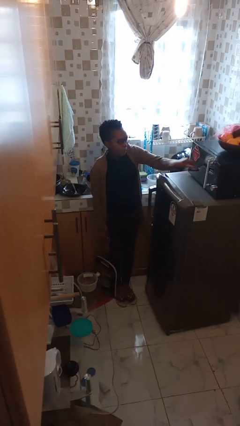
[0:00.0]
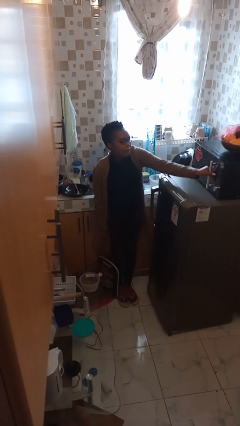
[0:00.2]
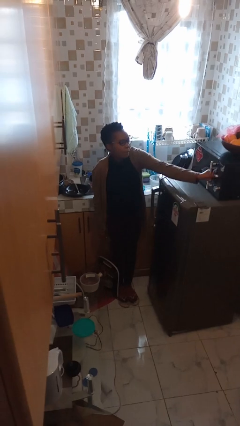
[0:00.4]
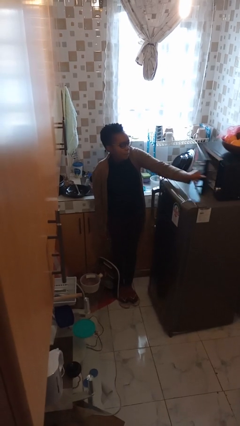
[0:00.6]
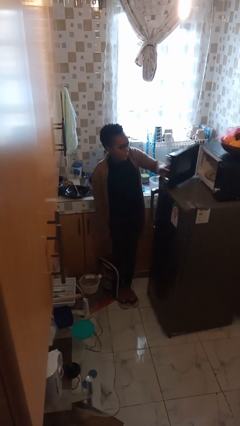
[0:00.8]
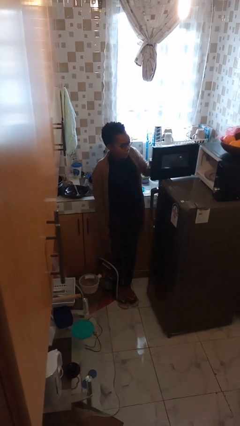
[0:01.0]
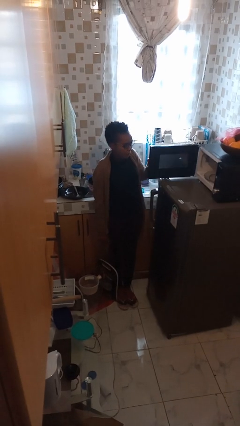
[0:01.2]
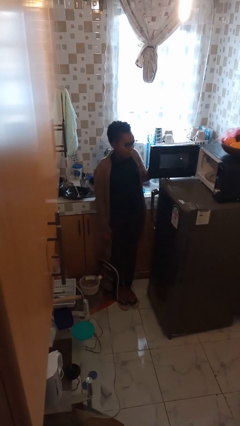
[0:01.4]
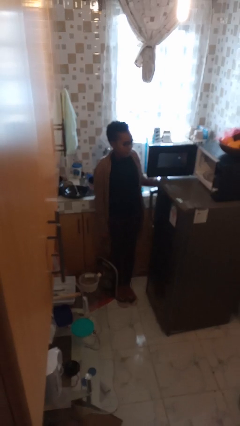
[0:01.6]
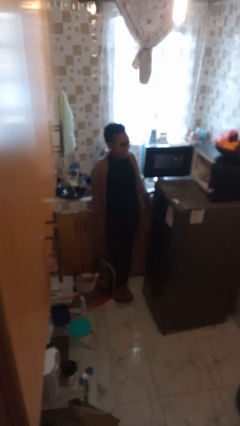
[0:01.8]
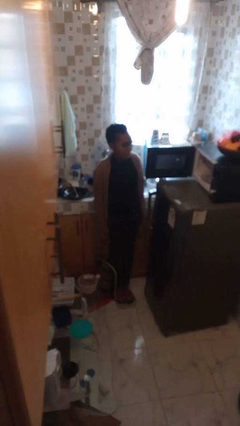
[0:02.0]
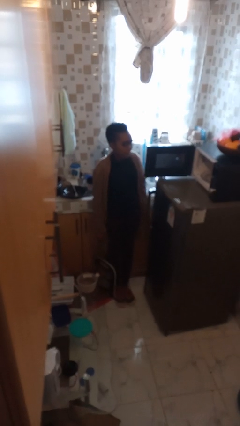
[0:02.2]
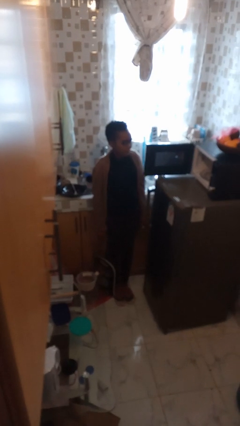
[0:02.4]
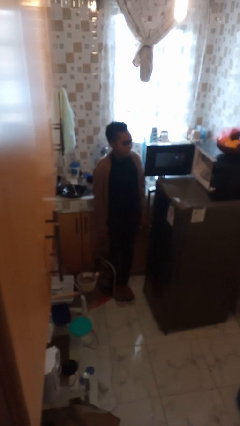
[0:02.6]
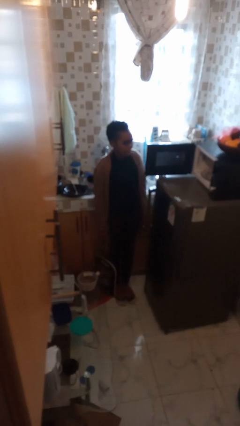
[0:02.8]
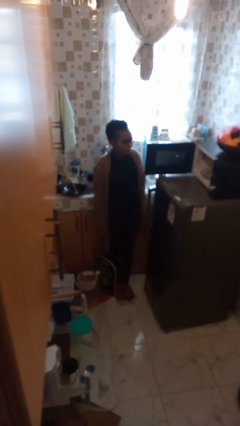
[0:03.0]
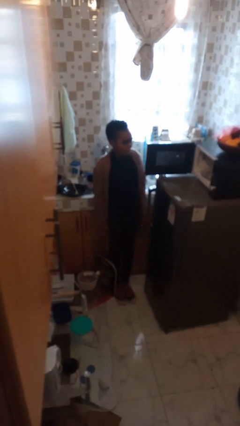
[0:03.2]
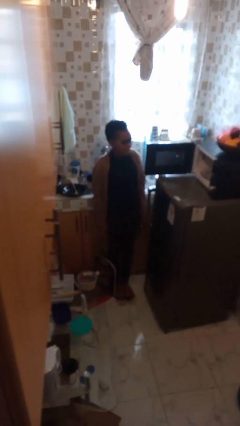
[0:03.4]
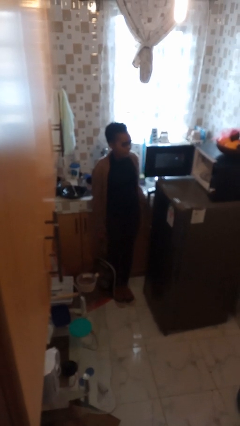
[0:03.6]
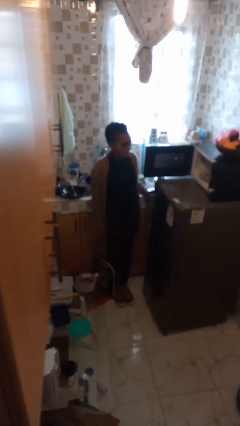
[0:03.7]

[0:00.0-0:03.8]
person opens microwave

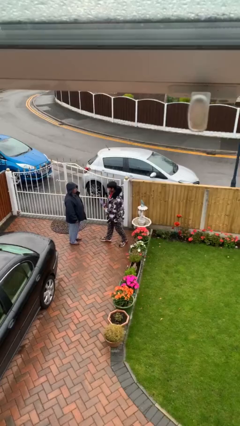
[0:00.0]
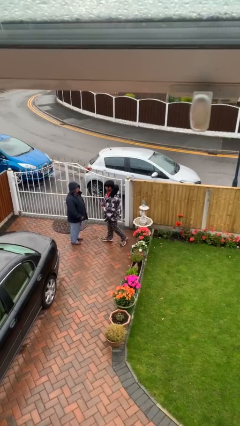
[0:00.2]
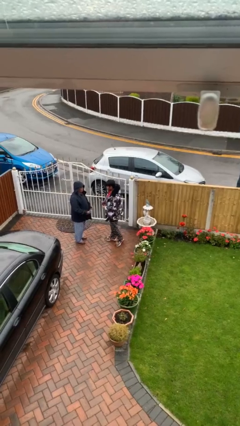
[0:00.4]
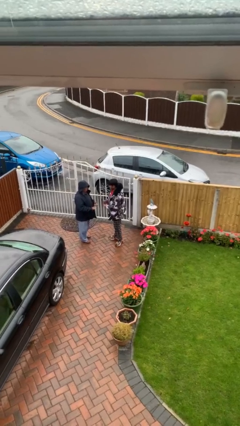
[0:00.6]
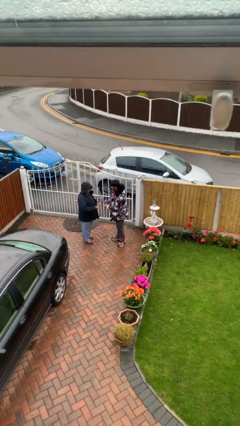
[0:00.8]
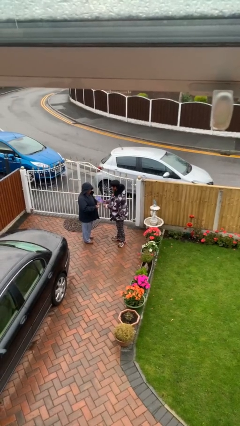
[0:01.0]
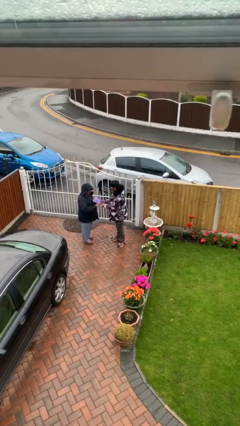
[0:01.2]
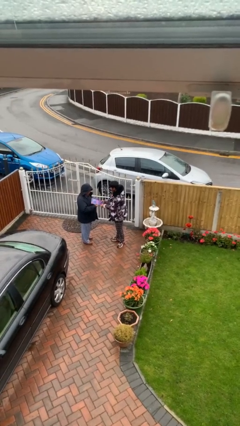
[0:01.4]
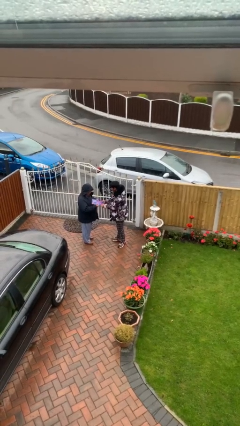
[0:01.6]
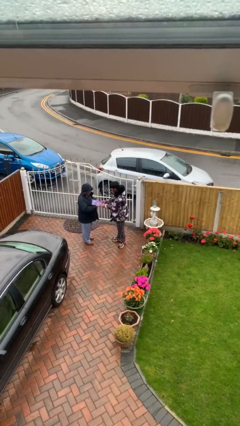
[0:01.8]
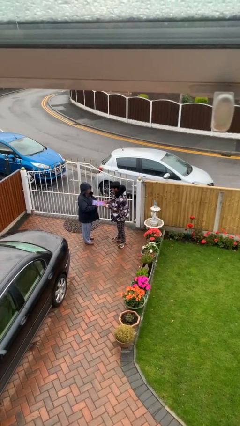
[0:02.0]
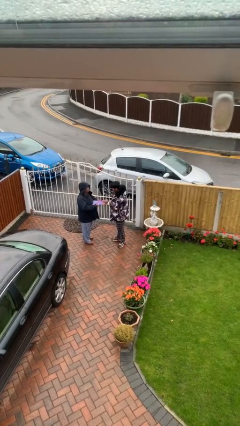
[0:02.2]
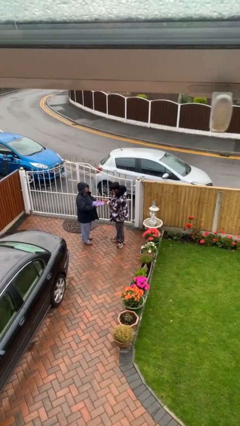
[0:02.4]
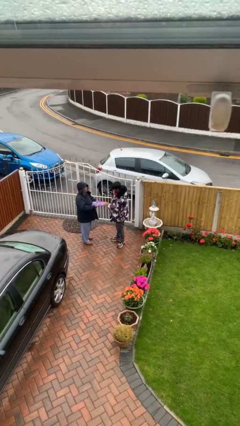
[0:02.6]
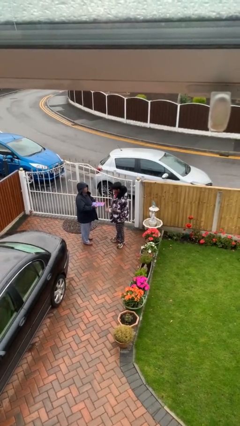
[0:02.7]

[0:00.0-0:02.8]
person transfers object to person

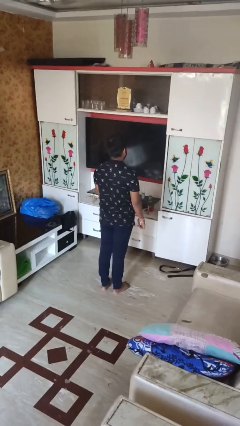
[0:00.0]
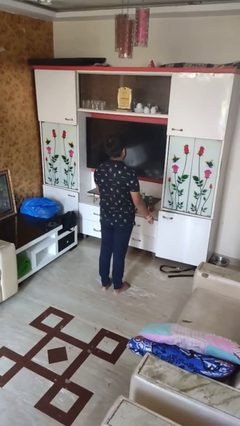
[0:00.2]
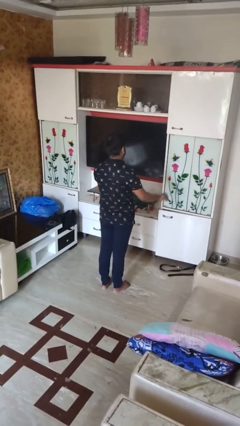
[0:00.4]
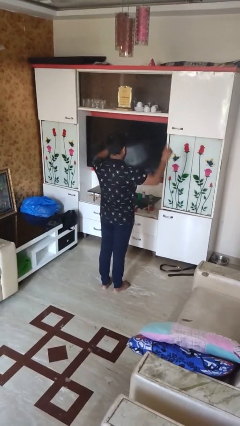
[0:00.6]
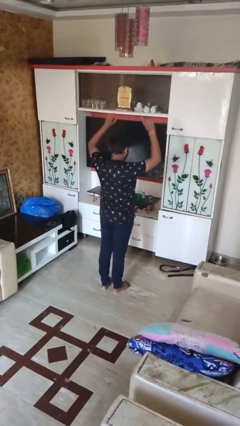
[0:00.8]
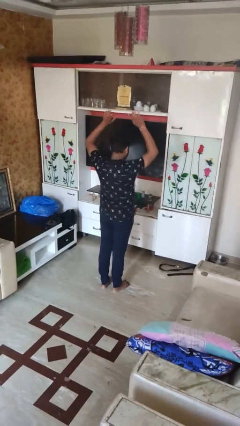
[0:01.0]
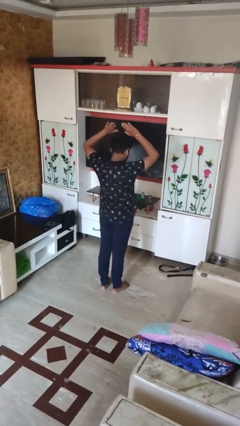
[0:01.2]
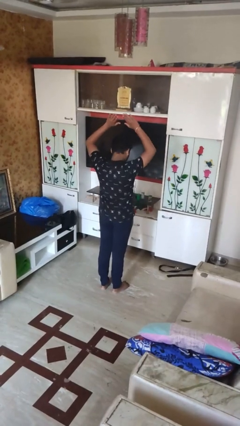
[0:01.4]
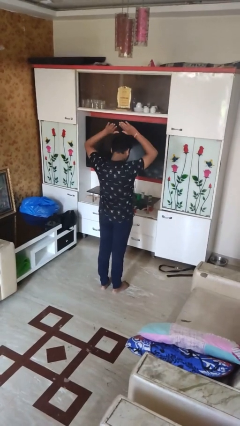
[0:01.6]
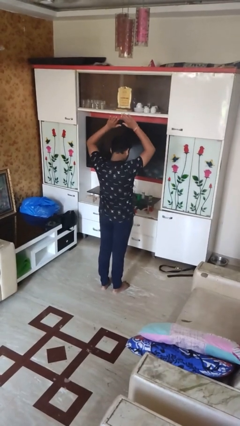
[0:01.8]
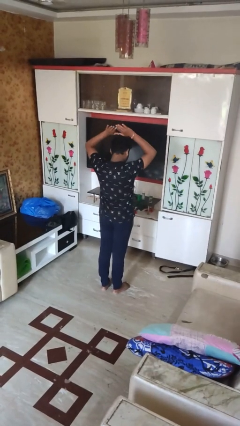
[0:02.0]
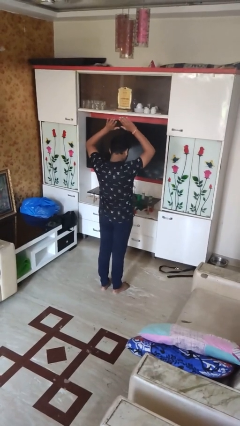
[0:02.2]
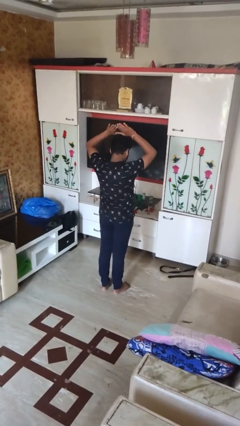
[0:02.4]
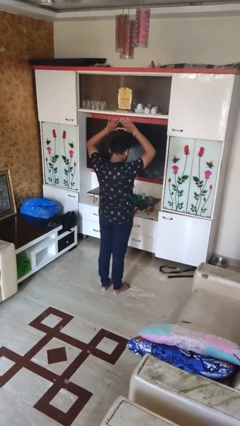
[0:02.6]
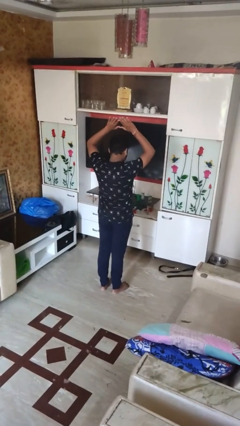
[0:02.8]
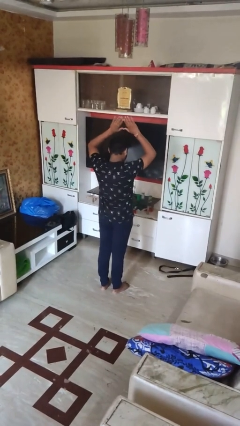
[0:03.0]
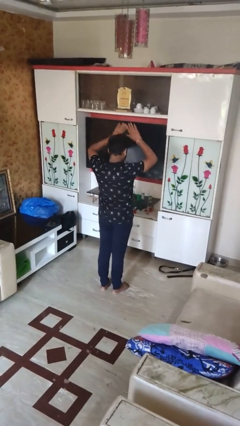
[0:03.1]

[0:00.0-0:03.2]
person dances in place

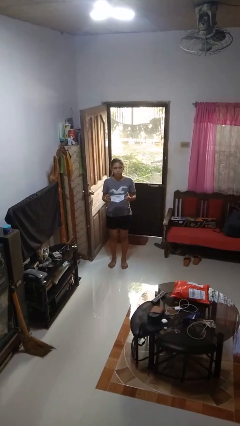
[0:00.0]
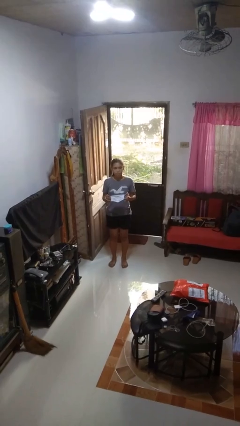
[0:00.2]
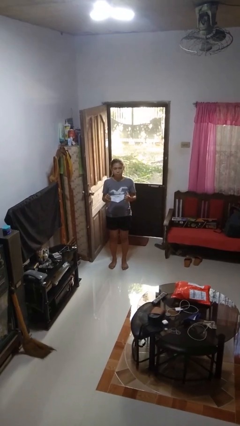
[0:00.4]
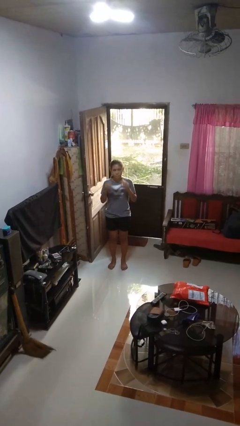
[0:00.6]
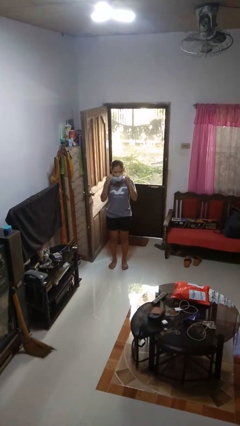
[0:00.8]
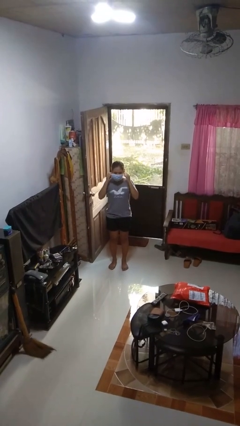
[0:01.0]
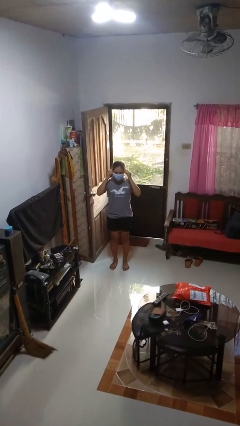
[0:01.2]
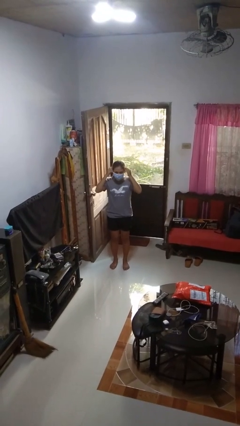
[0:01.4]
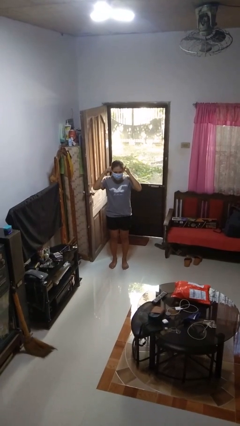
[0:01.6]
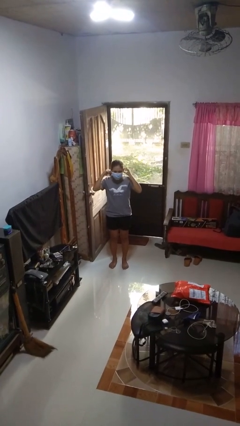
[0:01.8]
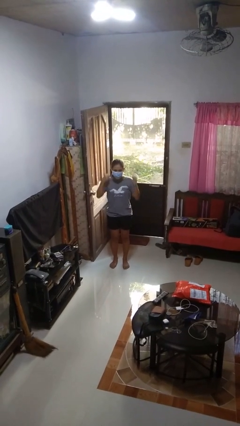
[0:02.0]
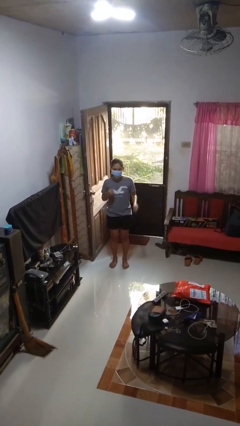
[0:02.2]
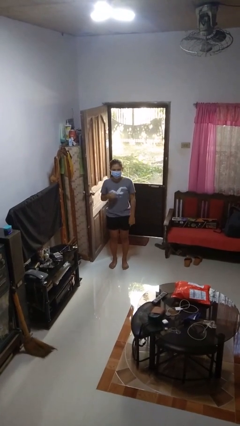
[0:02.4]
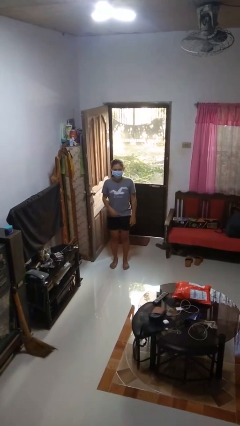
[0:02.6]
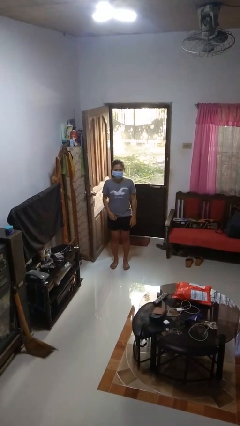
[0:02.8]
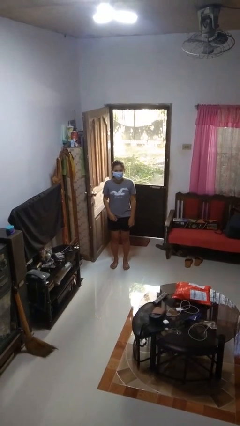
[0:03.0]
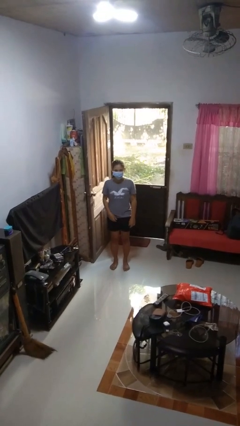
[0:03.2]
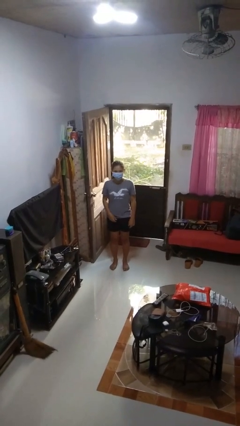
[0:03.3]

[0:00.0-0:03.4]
person puts on facemask

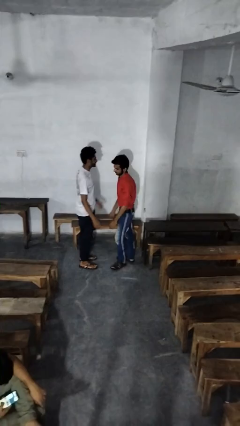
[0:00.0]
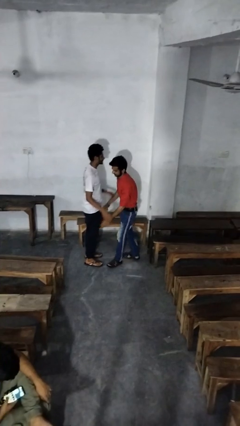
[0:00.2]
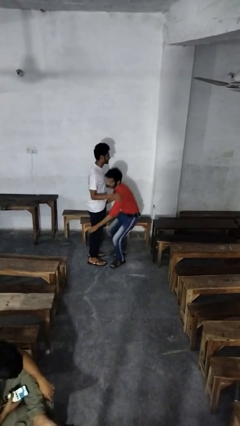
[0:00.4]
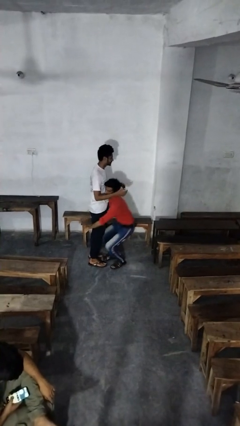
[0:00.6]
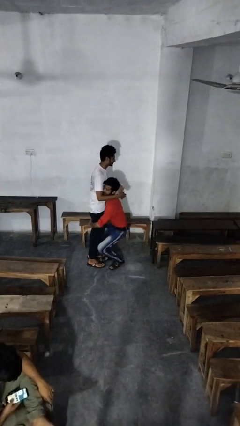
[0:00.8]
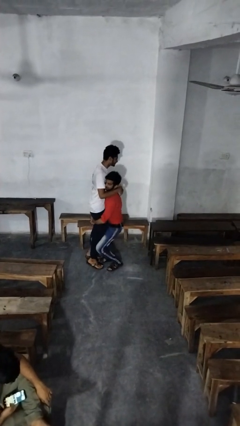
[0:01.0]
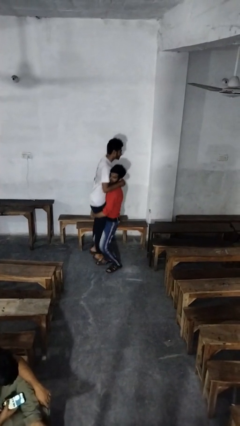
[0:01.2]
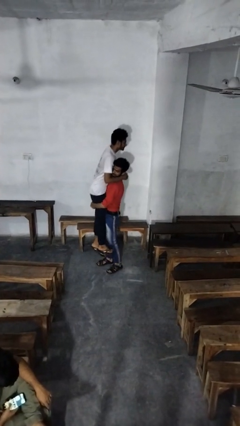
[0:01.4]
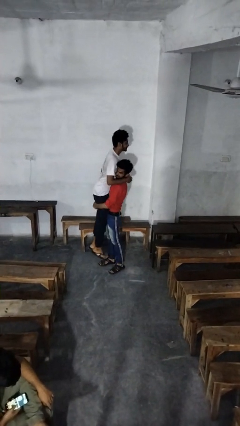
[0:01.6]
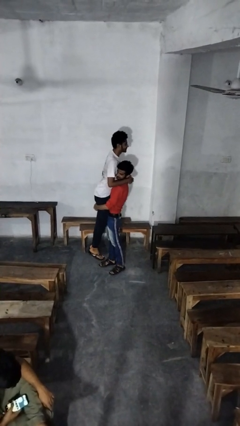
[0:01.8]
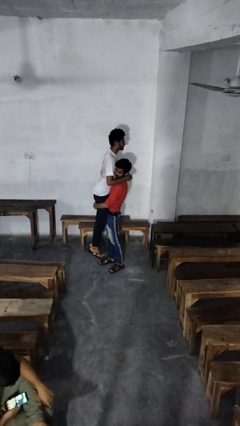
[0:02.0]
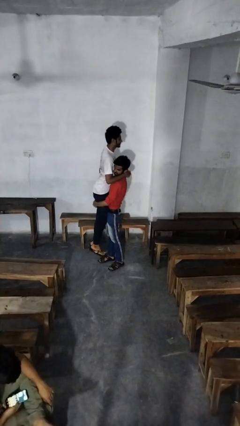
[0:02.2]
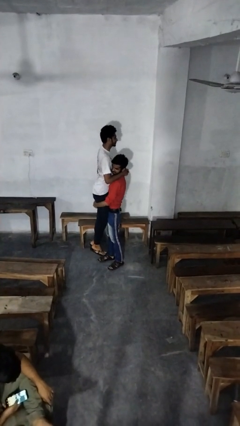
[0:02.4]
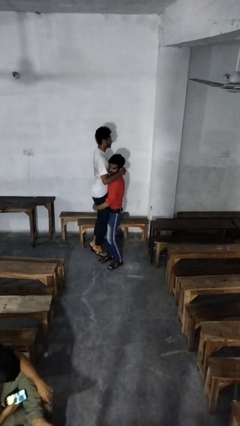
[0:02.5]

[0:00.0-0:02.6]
person picks up person

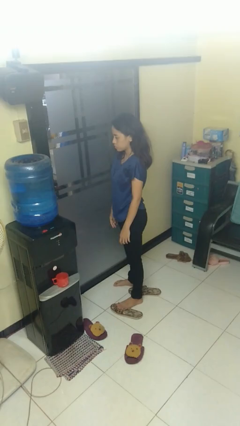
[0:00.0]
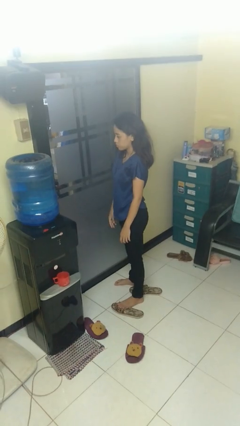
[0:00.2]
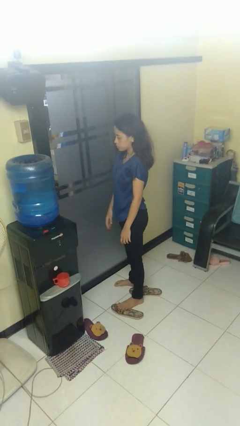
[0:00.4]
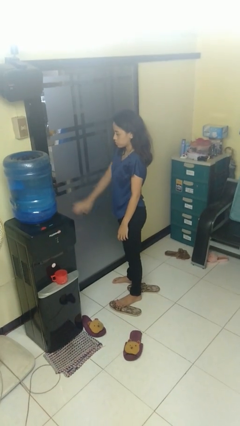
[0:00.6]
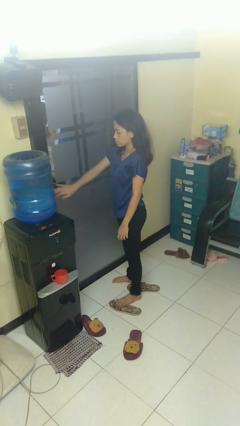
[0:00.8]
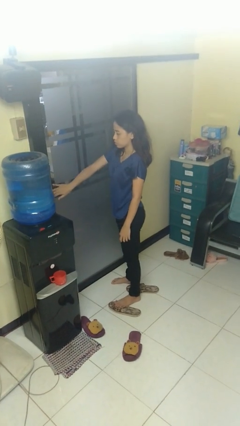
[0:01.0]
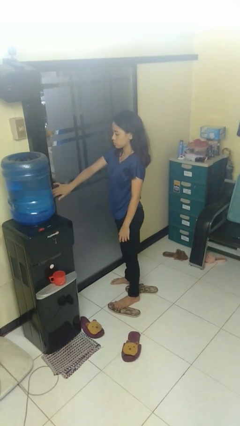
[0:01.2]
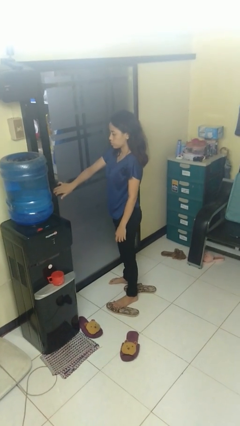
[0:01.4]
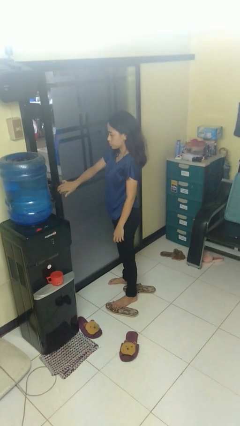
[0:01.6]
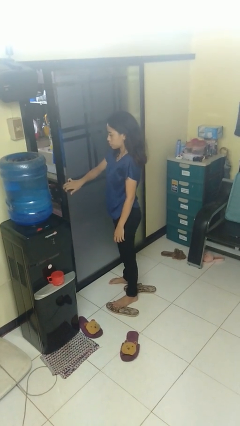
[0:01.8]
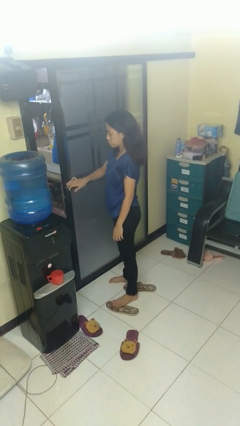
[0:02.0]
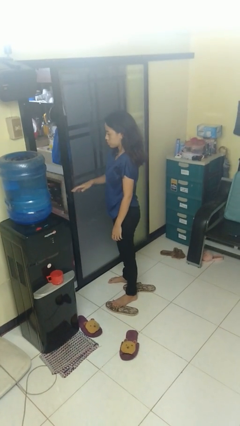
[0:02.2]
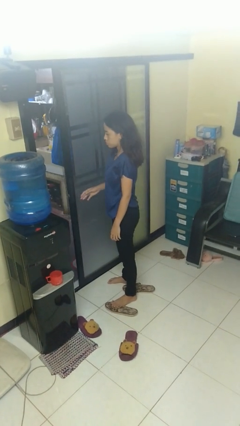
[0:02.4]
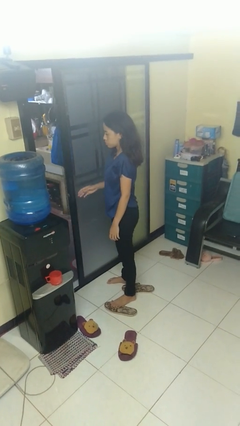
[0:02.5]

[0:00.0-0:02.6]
person opens sliding door
